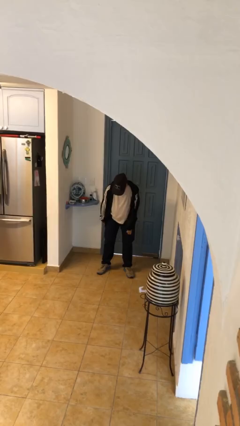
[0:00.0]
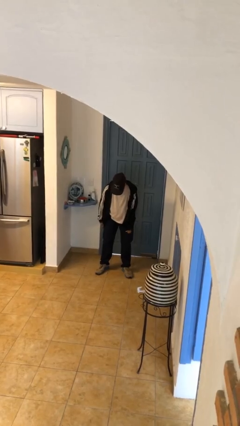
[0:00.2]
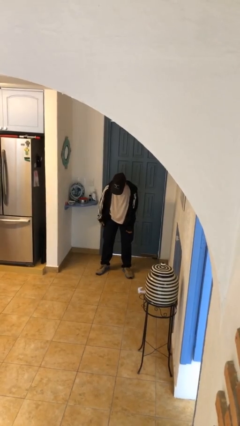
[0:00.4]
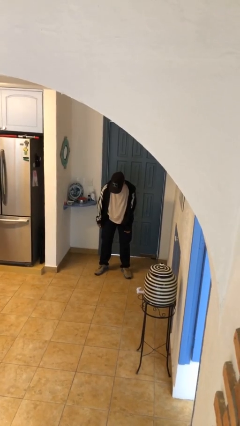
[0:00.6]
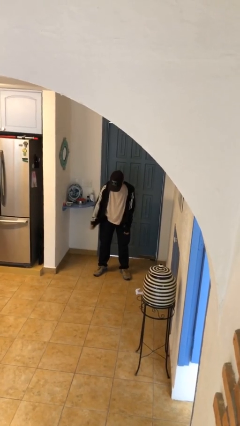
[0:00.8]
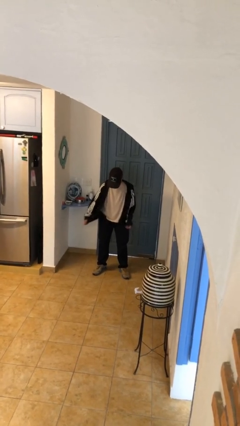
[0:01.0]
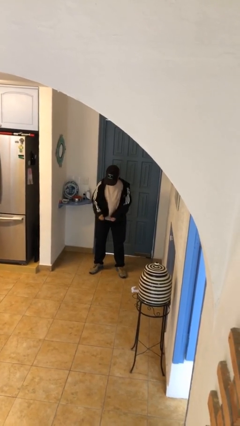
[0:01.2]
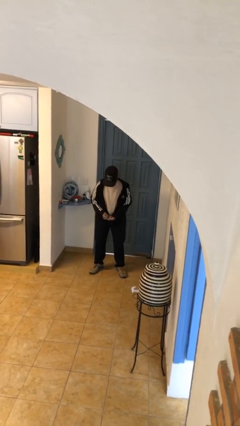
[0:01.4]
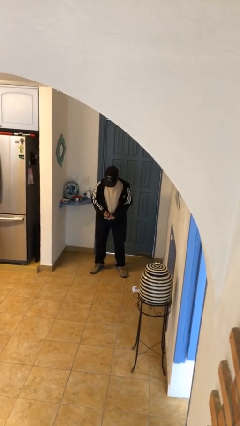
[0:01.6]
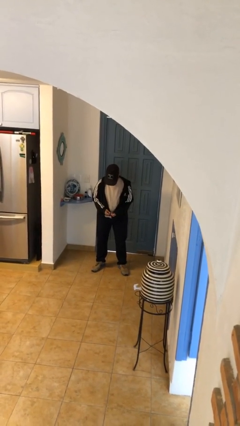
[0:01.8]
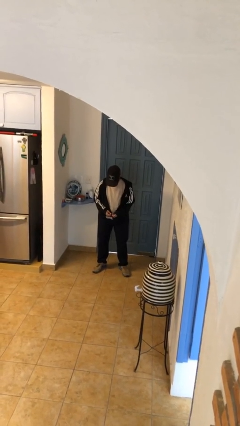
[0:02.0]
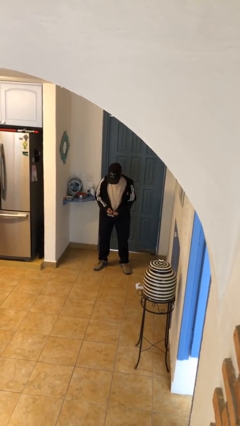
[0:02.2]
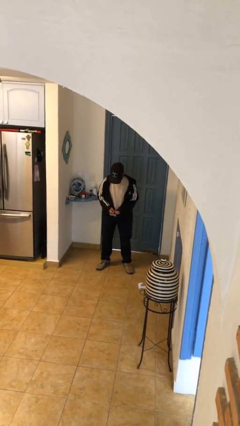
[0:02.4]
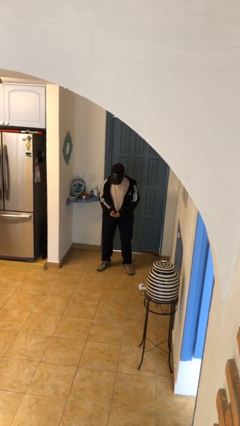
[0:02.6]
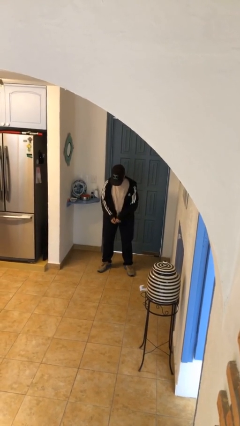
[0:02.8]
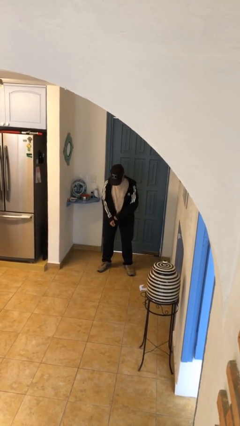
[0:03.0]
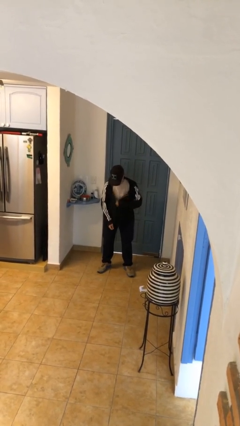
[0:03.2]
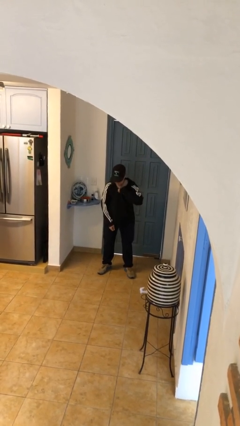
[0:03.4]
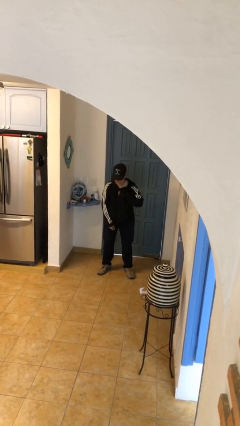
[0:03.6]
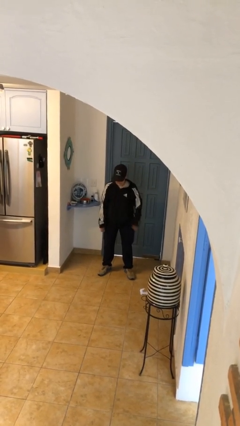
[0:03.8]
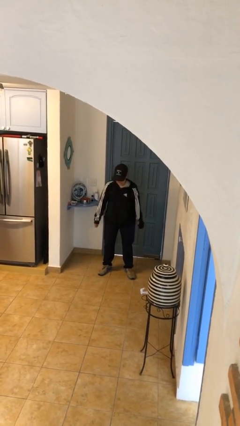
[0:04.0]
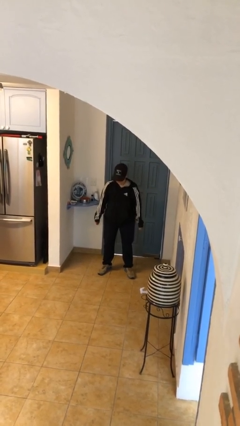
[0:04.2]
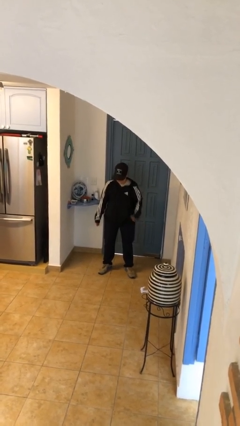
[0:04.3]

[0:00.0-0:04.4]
person zips up jacket

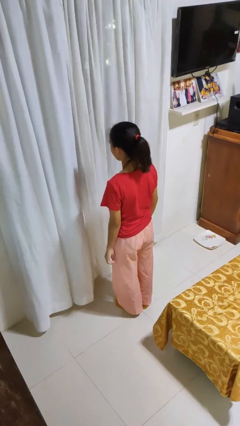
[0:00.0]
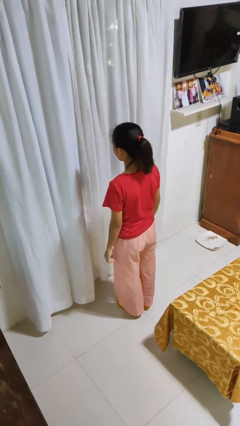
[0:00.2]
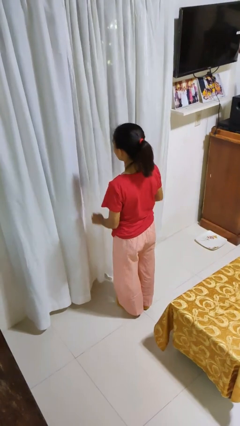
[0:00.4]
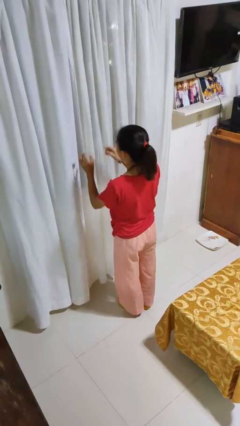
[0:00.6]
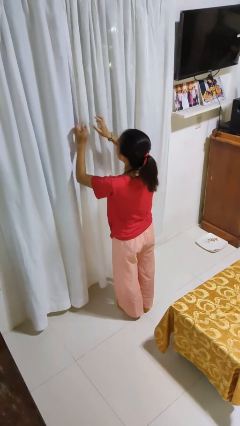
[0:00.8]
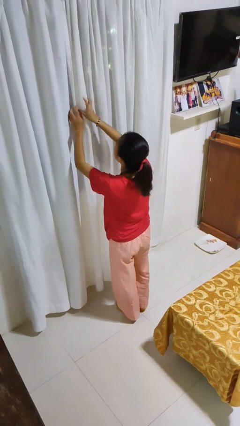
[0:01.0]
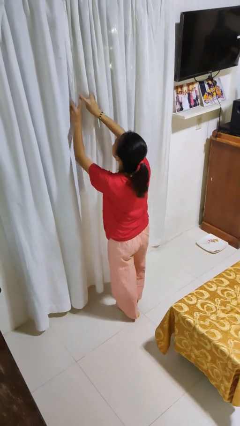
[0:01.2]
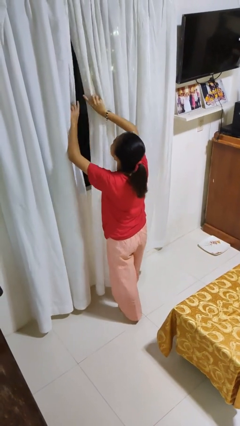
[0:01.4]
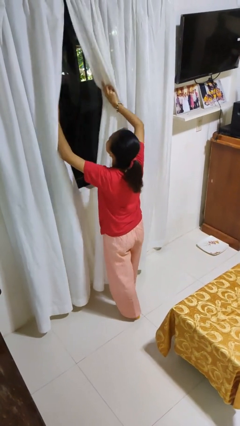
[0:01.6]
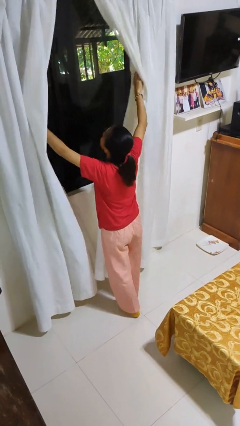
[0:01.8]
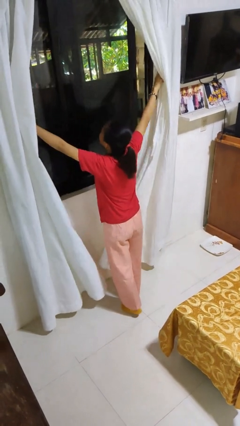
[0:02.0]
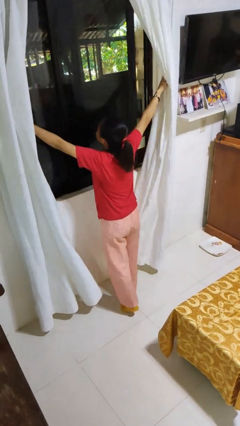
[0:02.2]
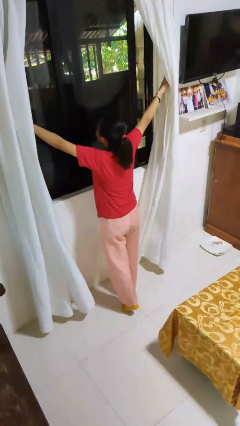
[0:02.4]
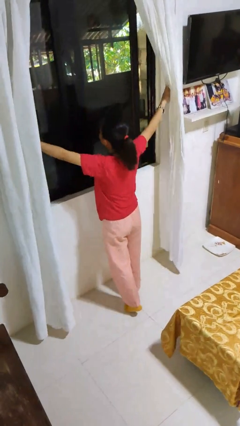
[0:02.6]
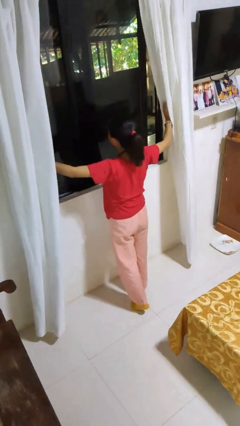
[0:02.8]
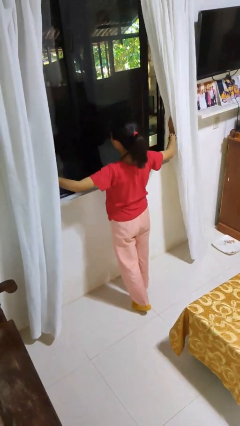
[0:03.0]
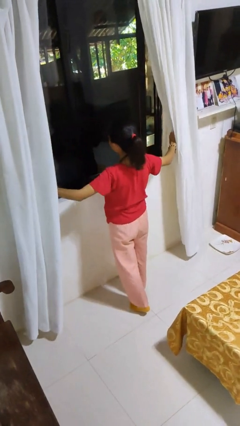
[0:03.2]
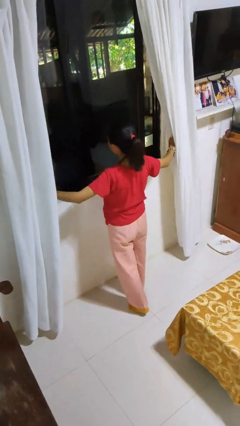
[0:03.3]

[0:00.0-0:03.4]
person opens curtains

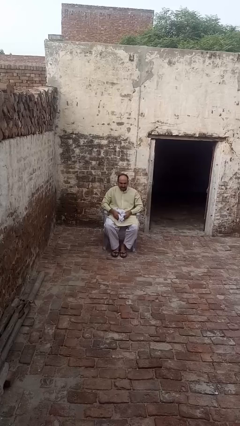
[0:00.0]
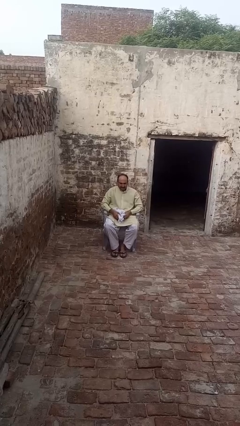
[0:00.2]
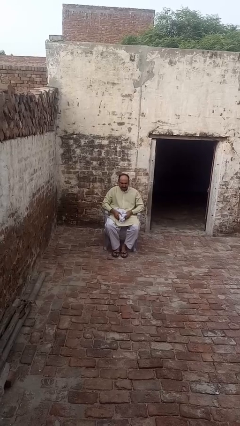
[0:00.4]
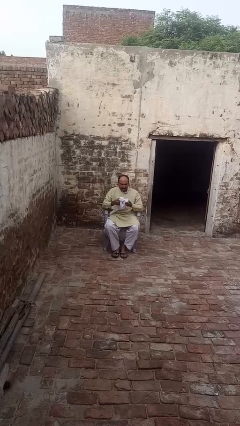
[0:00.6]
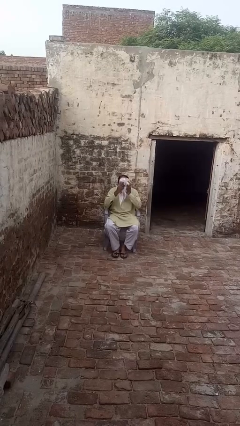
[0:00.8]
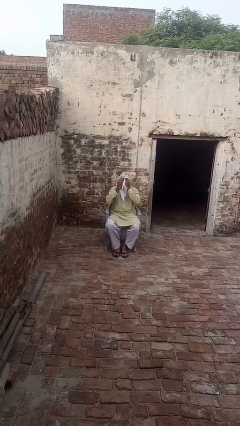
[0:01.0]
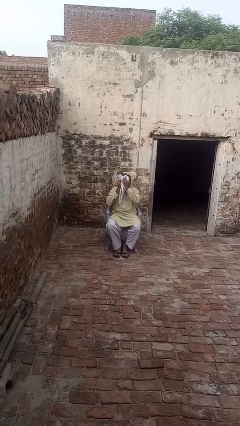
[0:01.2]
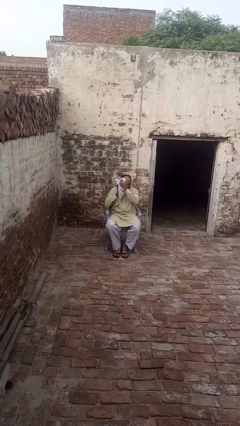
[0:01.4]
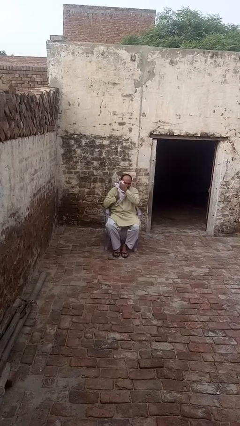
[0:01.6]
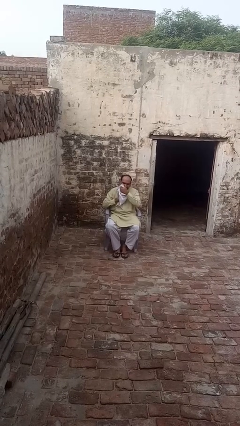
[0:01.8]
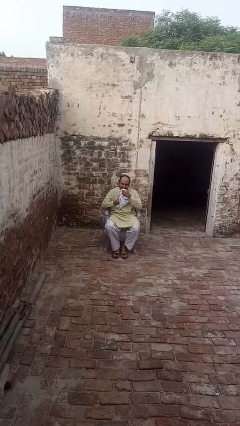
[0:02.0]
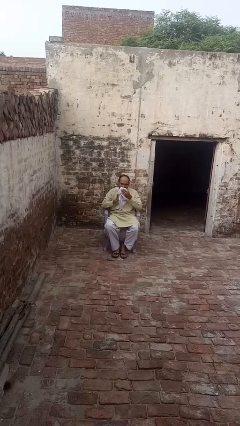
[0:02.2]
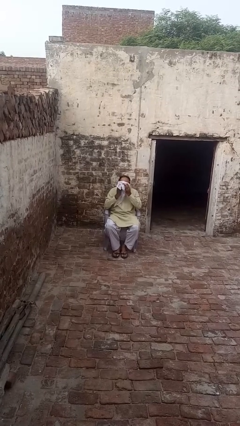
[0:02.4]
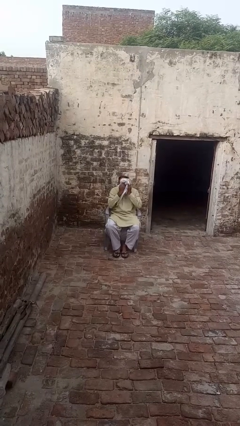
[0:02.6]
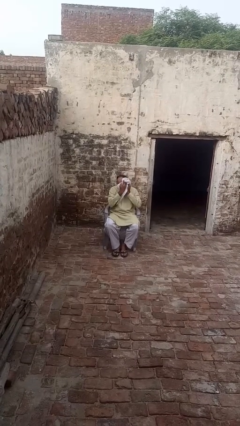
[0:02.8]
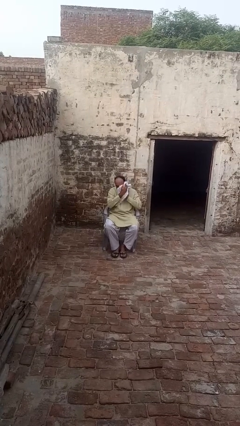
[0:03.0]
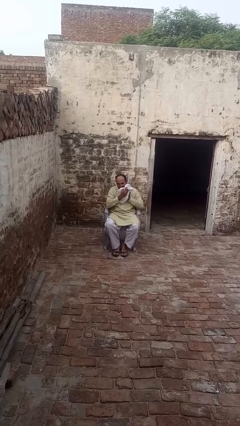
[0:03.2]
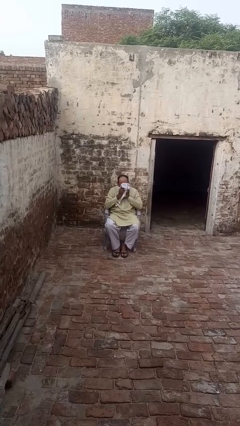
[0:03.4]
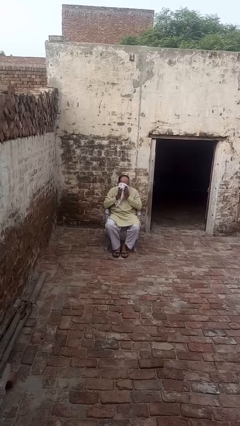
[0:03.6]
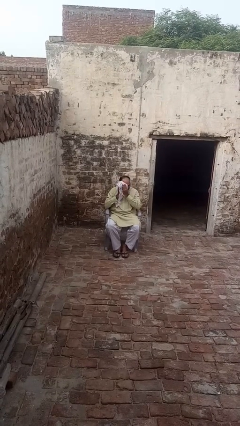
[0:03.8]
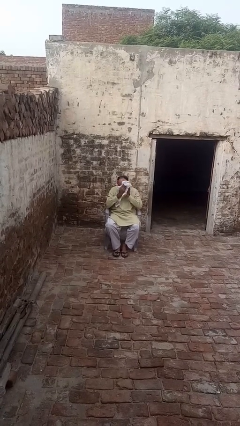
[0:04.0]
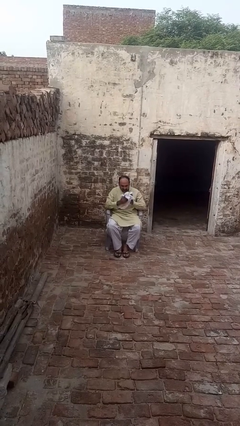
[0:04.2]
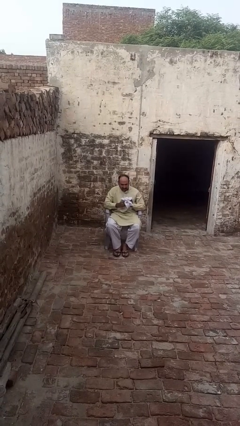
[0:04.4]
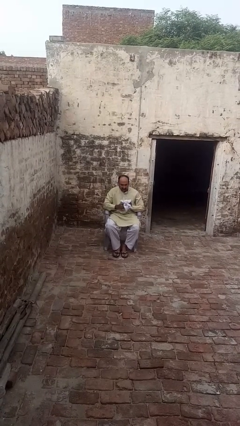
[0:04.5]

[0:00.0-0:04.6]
person wipes mouth with napkin

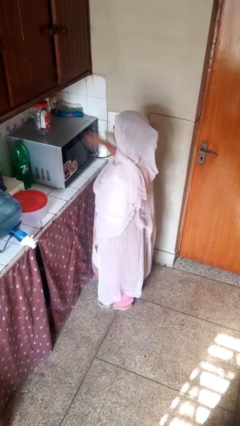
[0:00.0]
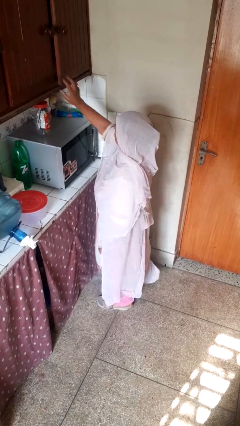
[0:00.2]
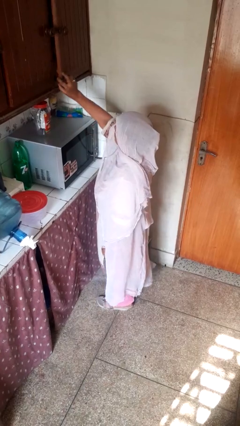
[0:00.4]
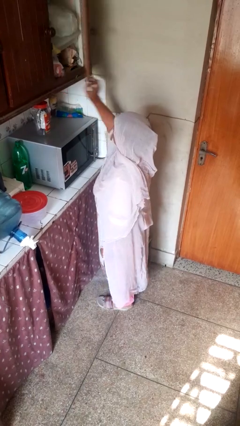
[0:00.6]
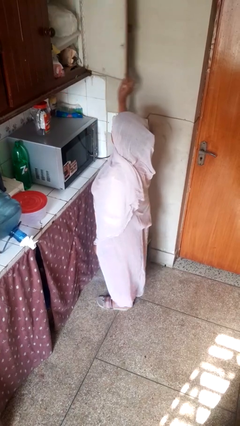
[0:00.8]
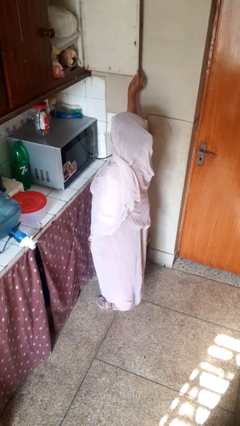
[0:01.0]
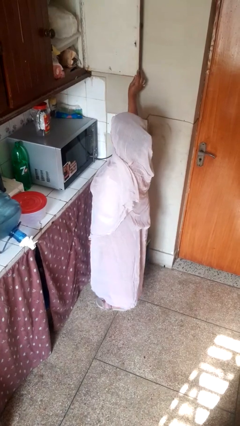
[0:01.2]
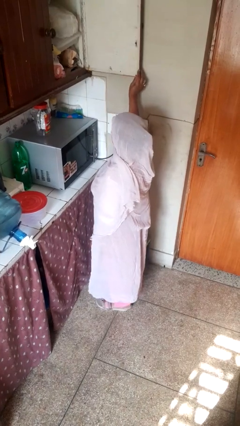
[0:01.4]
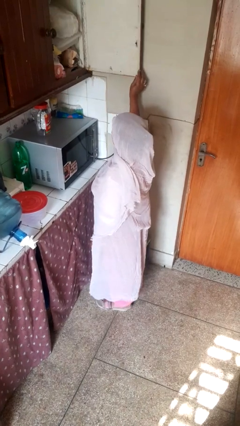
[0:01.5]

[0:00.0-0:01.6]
person opens cabinet

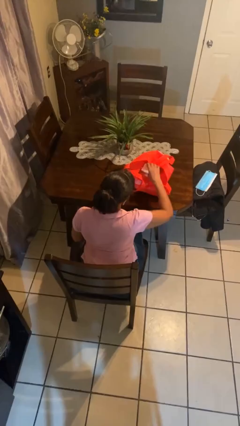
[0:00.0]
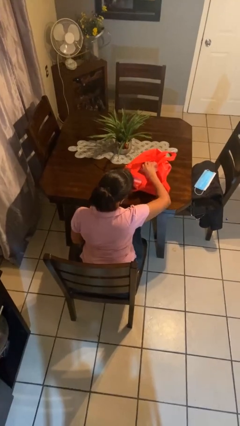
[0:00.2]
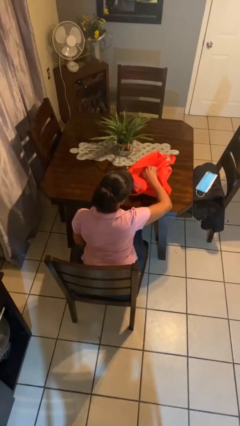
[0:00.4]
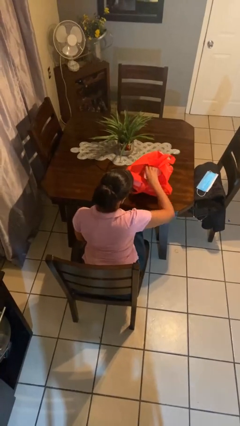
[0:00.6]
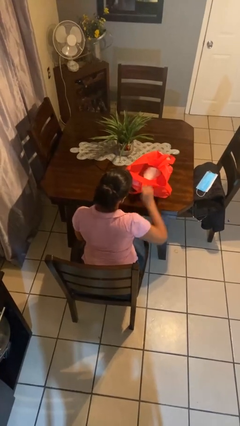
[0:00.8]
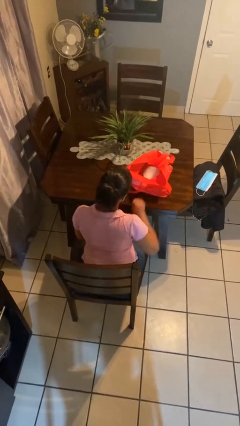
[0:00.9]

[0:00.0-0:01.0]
person puts object into bag

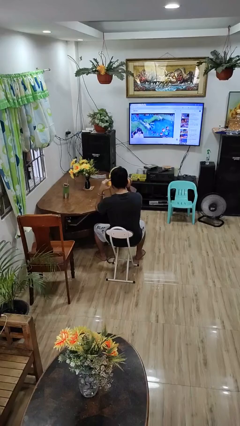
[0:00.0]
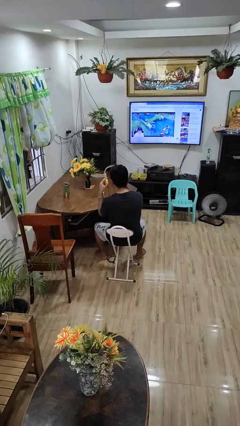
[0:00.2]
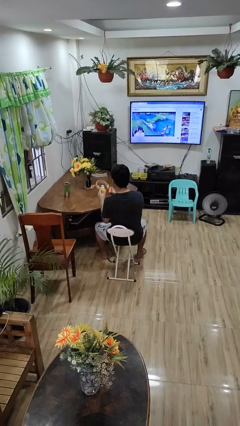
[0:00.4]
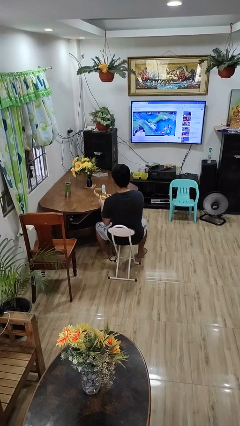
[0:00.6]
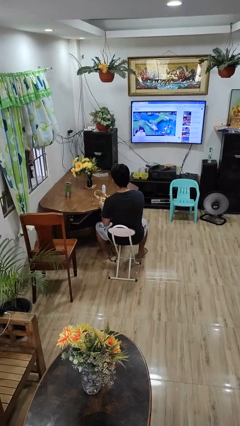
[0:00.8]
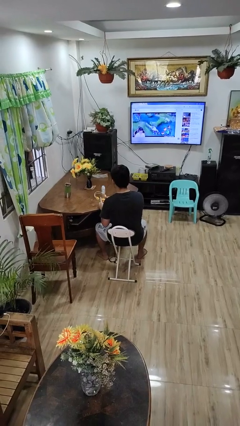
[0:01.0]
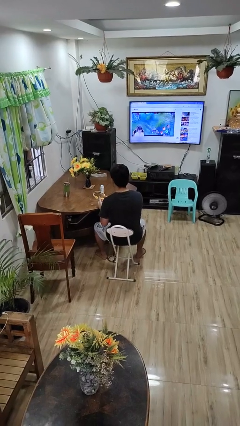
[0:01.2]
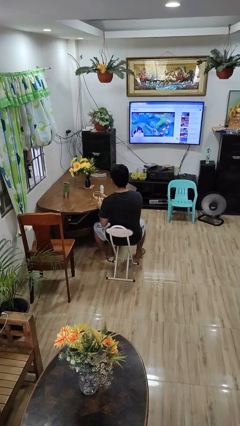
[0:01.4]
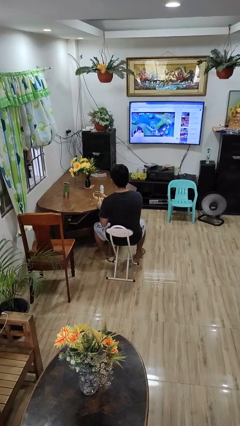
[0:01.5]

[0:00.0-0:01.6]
person takes off headphones

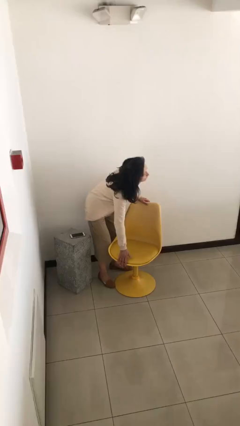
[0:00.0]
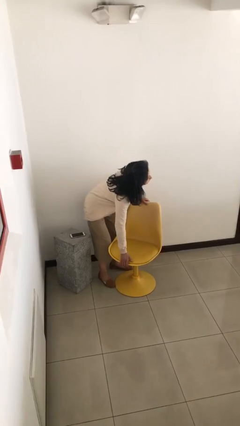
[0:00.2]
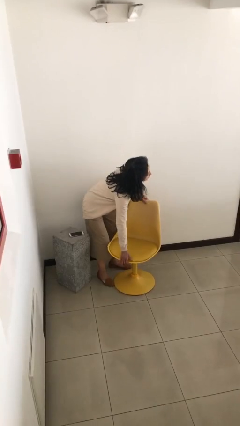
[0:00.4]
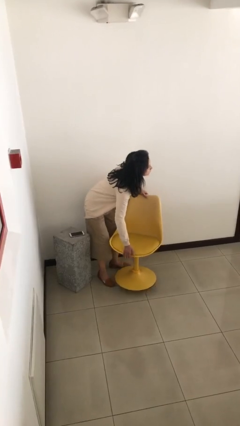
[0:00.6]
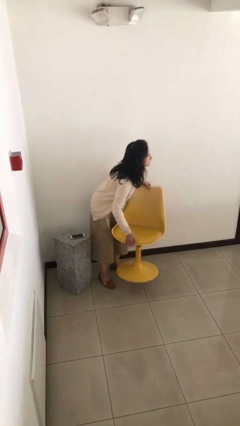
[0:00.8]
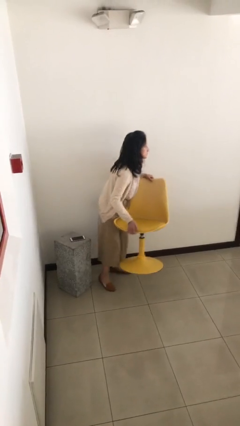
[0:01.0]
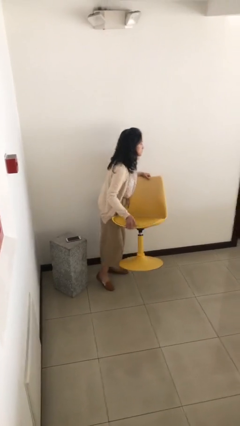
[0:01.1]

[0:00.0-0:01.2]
person picks up object from floor
